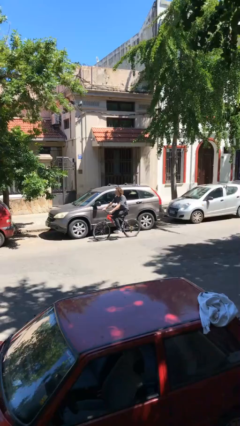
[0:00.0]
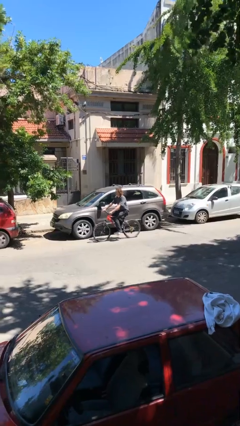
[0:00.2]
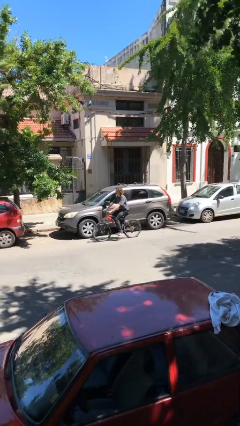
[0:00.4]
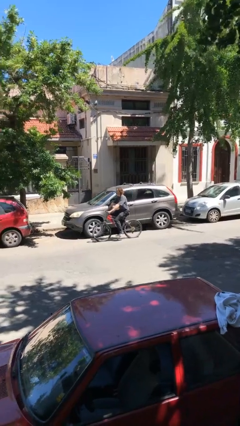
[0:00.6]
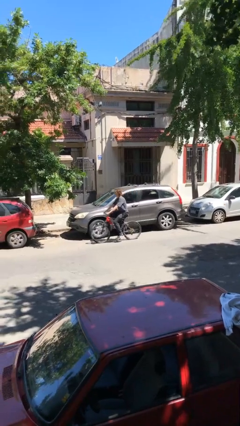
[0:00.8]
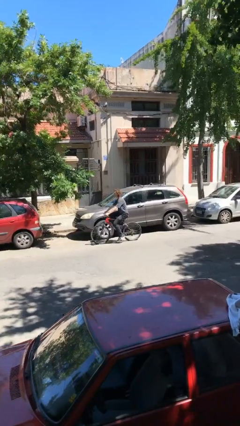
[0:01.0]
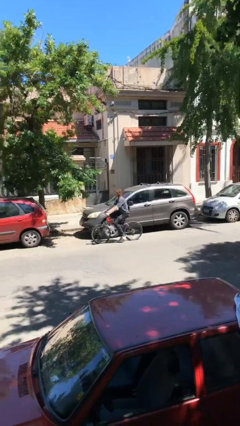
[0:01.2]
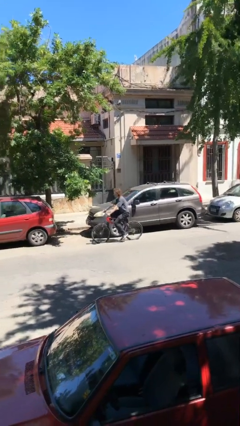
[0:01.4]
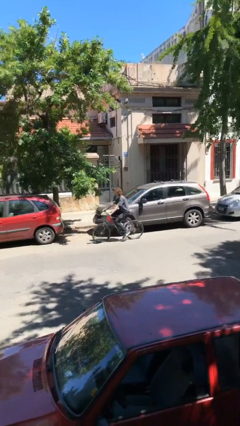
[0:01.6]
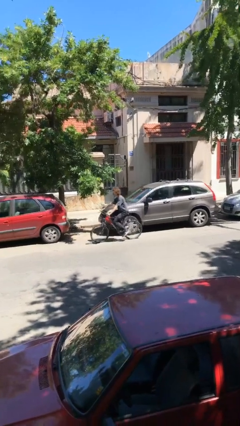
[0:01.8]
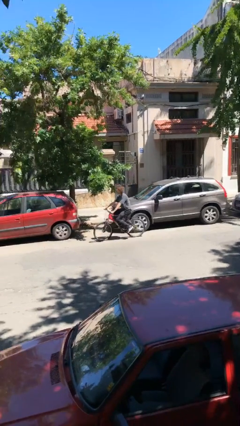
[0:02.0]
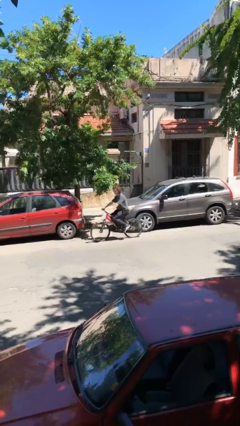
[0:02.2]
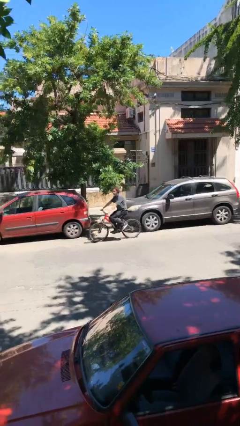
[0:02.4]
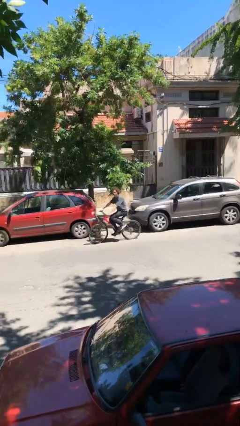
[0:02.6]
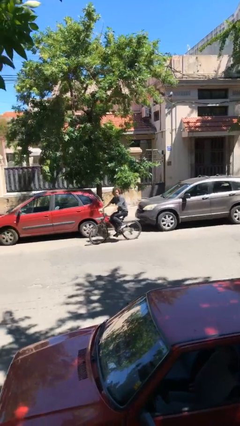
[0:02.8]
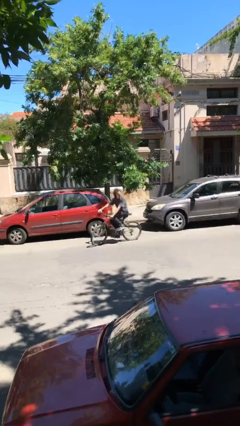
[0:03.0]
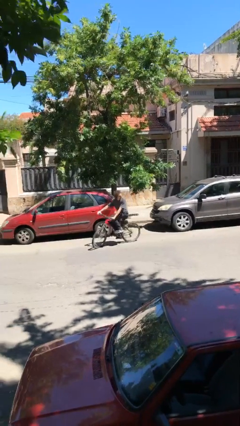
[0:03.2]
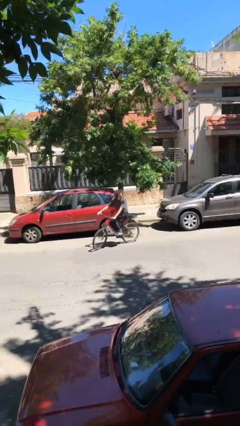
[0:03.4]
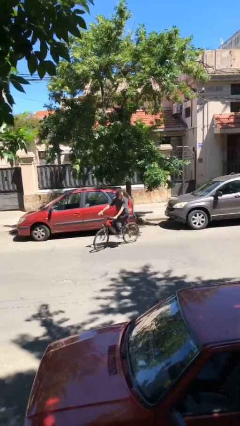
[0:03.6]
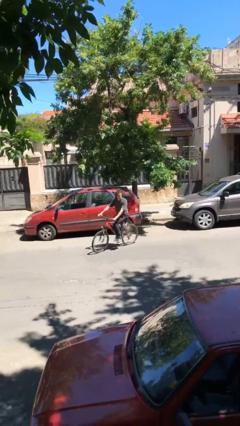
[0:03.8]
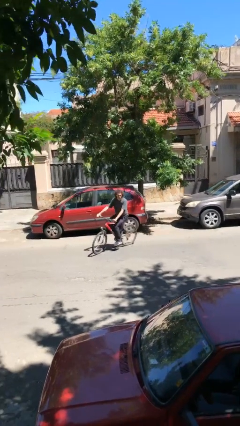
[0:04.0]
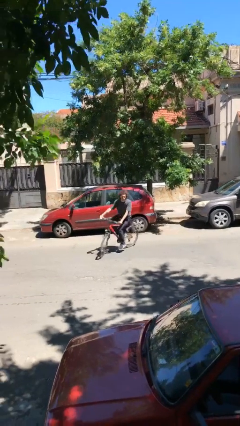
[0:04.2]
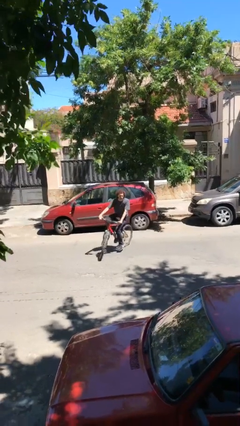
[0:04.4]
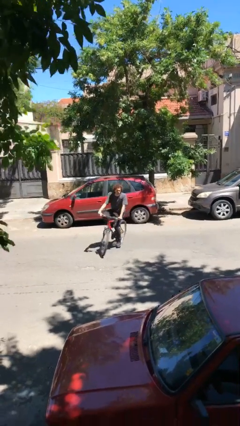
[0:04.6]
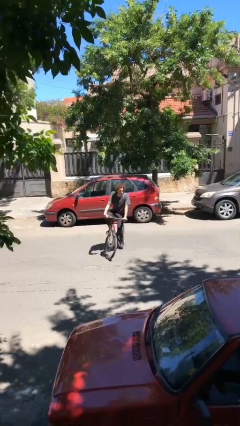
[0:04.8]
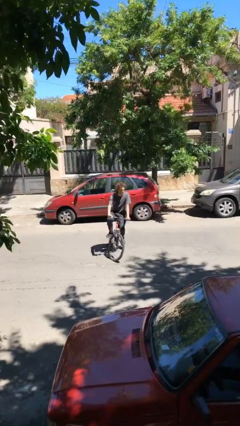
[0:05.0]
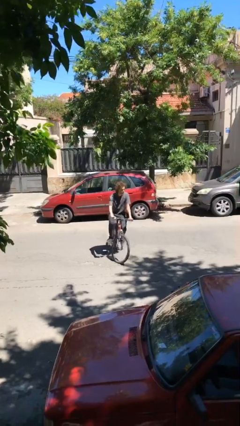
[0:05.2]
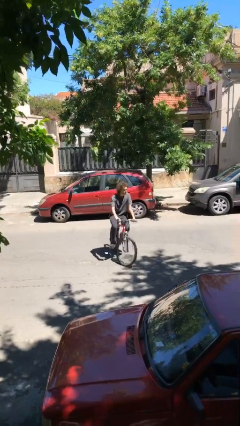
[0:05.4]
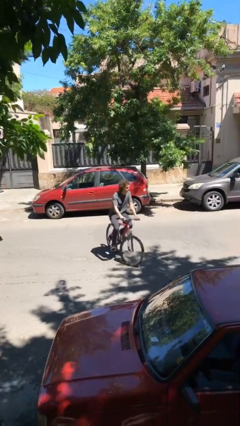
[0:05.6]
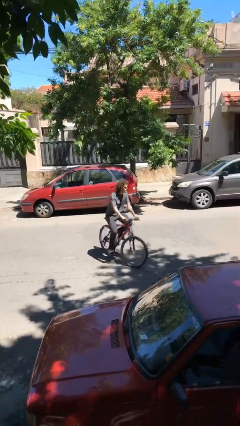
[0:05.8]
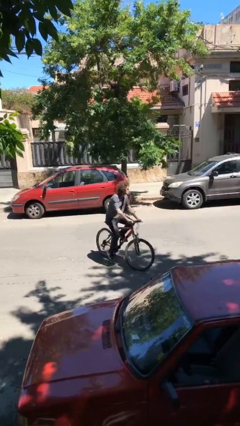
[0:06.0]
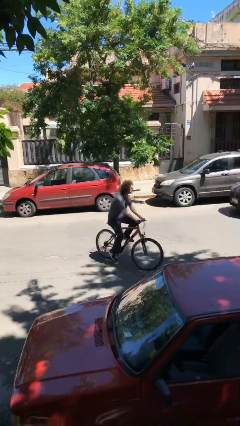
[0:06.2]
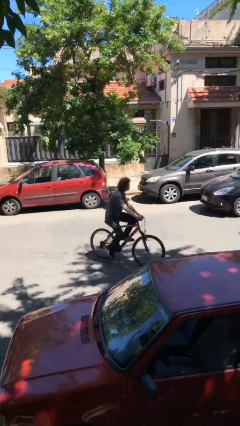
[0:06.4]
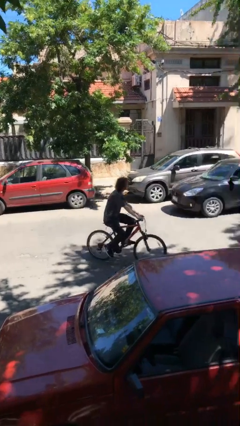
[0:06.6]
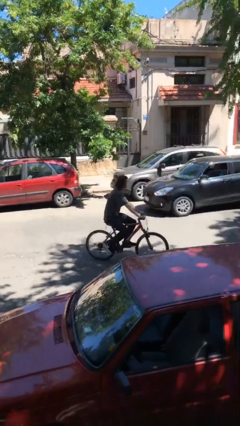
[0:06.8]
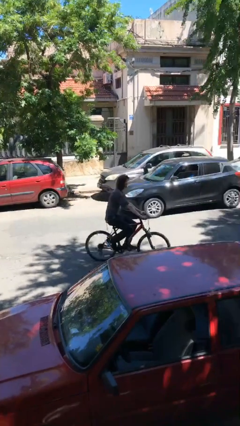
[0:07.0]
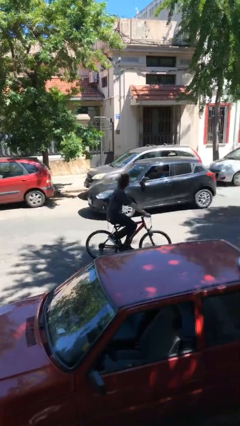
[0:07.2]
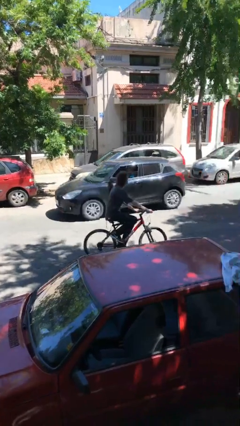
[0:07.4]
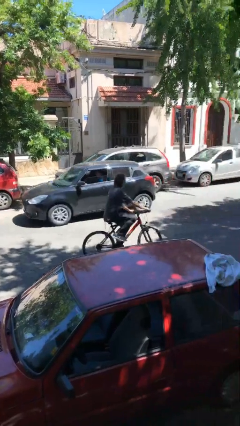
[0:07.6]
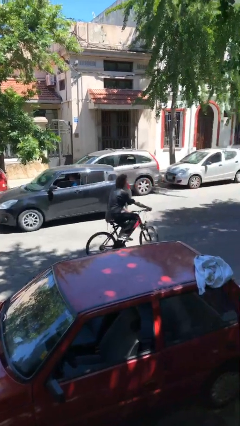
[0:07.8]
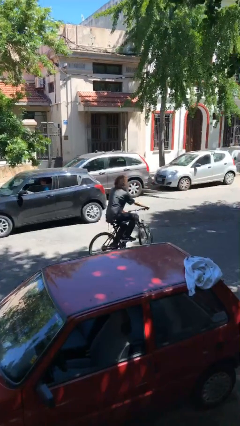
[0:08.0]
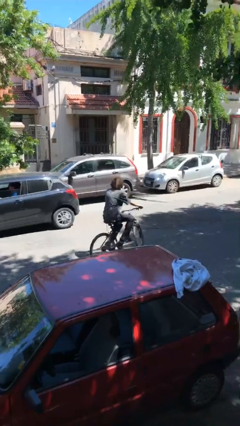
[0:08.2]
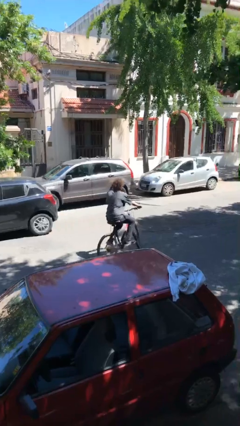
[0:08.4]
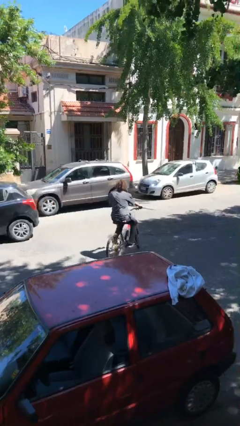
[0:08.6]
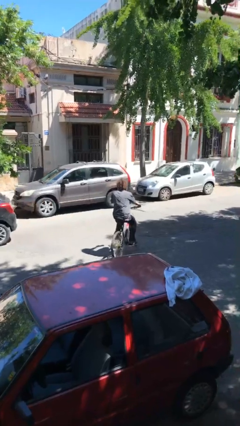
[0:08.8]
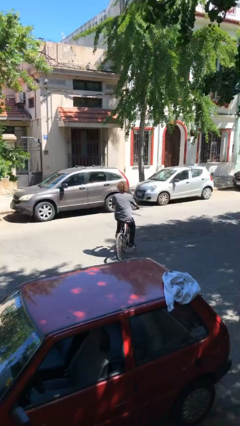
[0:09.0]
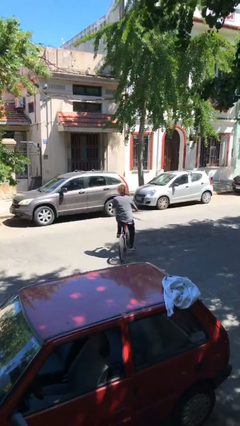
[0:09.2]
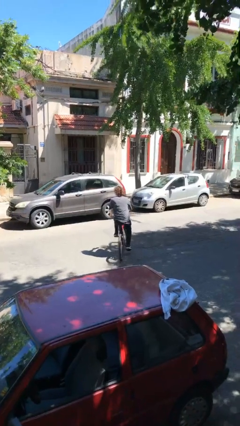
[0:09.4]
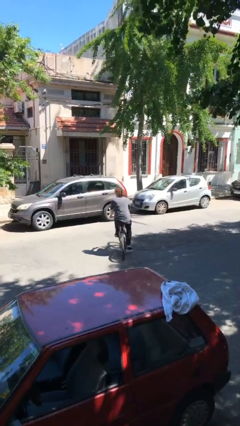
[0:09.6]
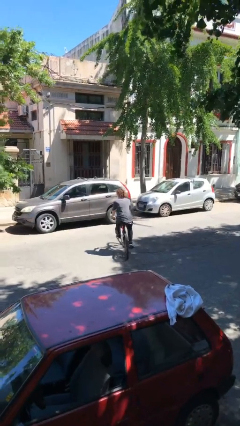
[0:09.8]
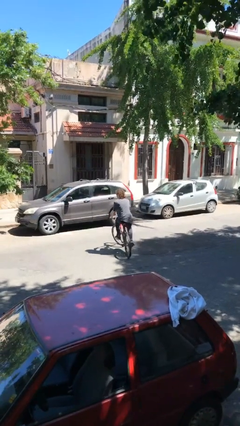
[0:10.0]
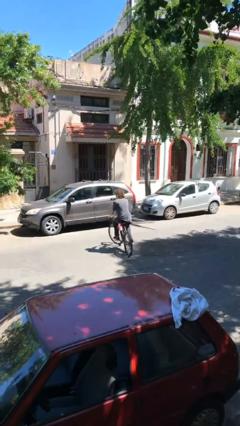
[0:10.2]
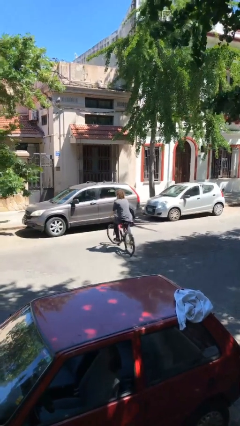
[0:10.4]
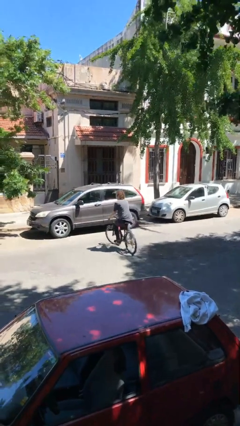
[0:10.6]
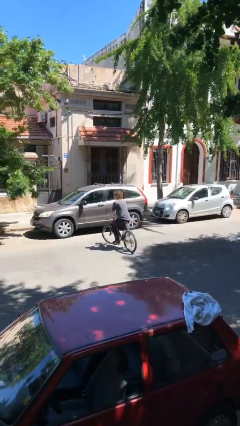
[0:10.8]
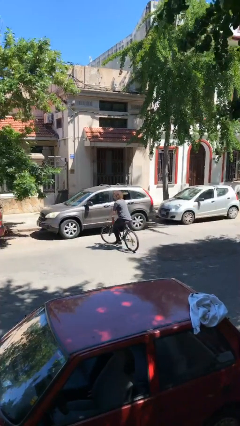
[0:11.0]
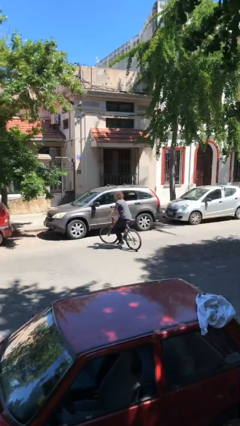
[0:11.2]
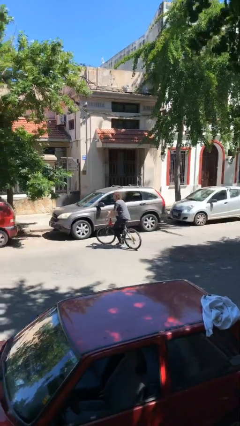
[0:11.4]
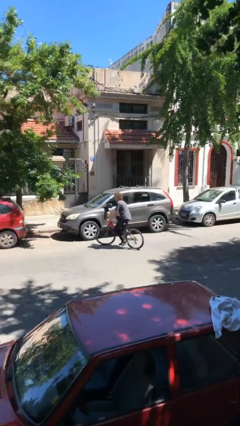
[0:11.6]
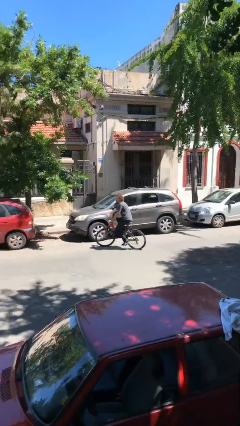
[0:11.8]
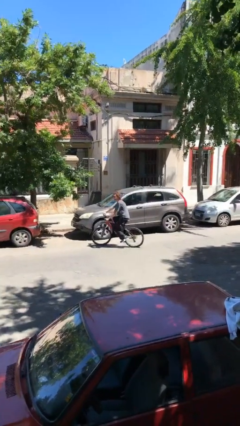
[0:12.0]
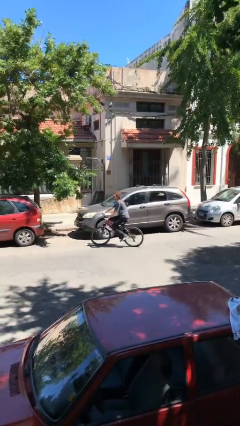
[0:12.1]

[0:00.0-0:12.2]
person rides bicycle

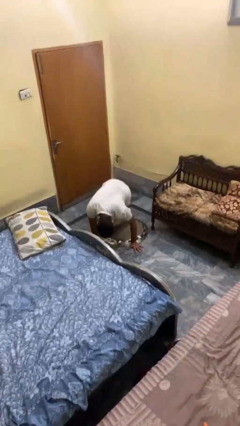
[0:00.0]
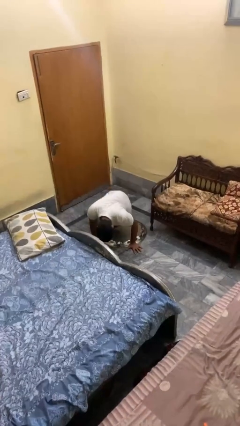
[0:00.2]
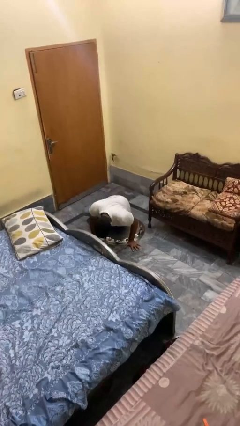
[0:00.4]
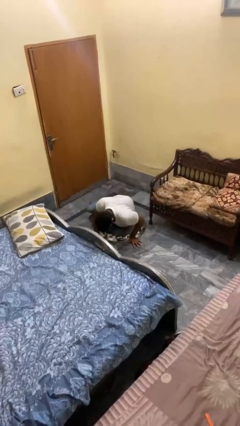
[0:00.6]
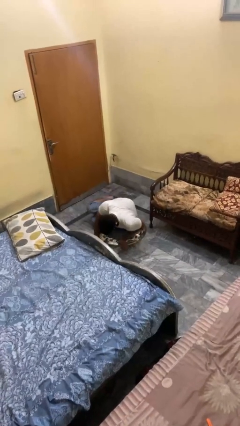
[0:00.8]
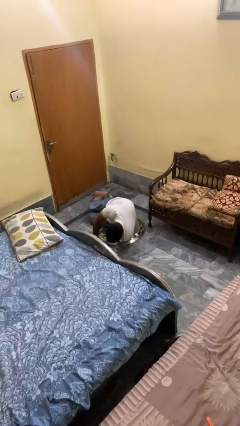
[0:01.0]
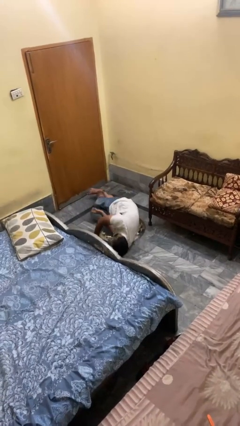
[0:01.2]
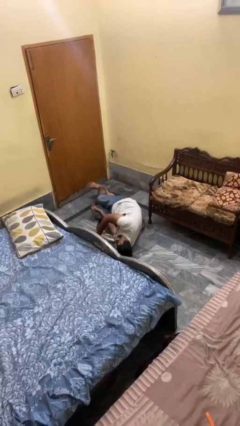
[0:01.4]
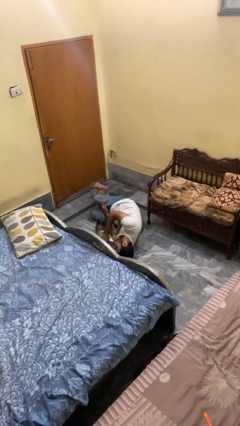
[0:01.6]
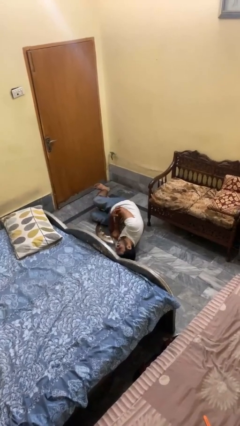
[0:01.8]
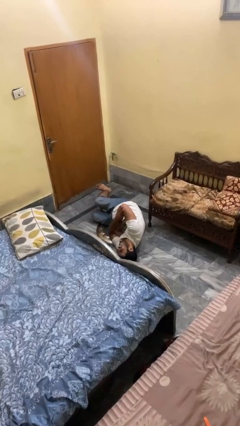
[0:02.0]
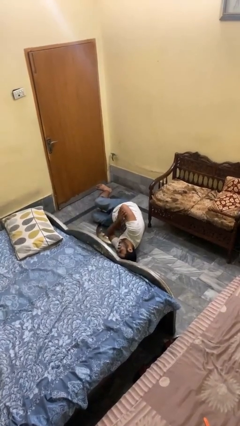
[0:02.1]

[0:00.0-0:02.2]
person lies down on floor

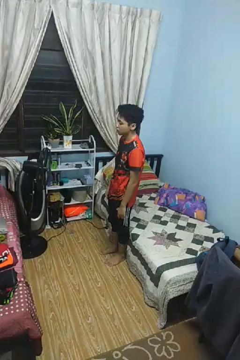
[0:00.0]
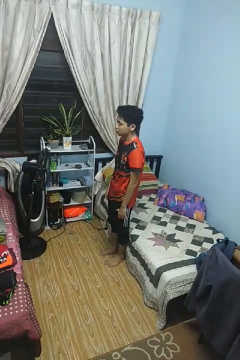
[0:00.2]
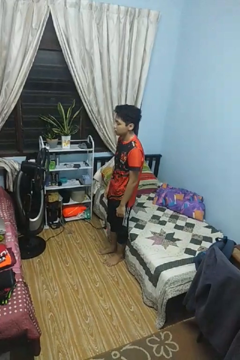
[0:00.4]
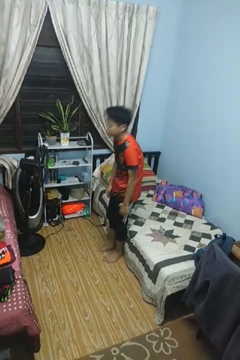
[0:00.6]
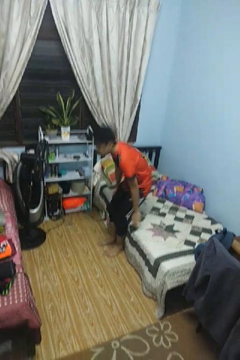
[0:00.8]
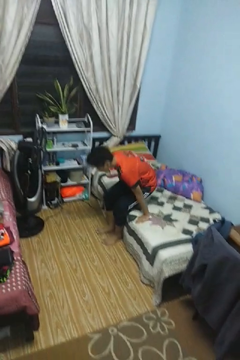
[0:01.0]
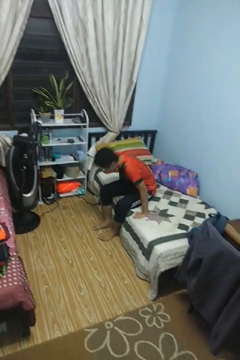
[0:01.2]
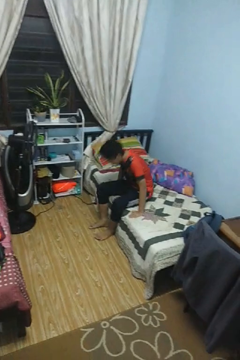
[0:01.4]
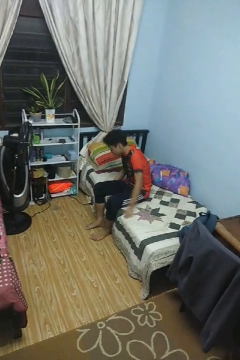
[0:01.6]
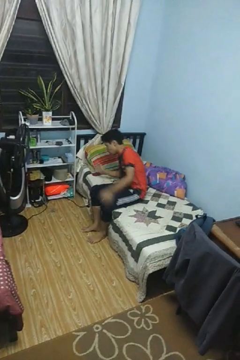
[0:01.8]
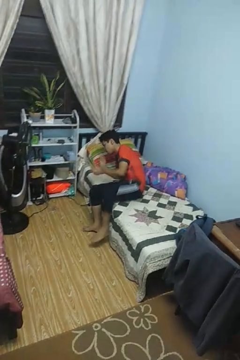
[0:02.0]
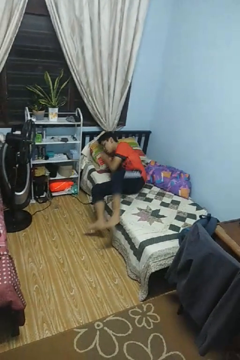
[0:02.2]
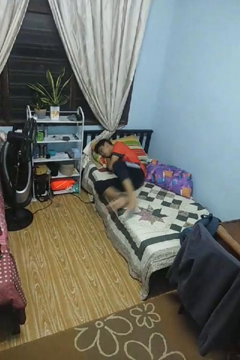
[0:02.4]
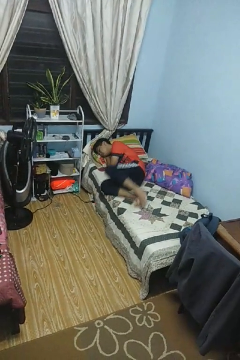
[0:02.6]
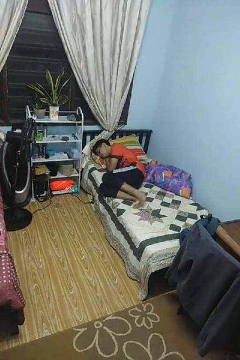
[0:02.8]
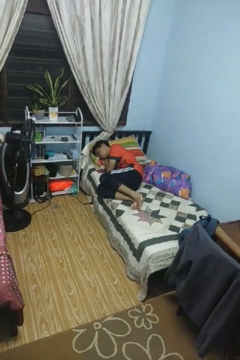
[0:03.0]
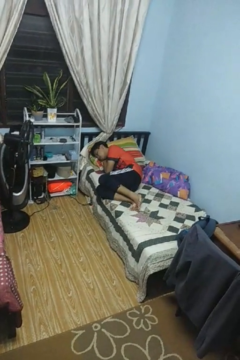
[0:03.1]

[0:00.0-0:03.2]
person lies down on bed

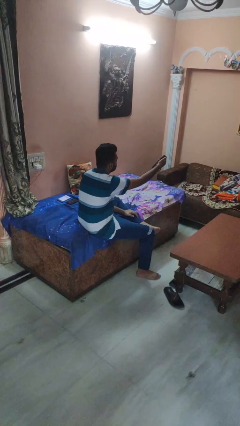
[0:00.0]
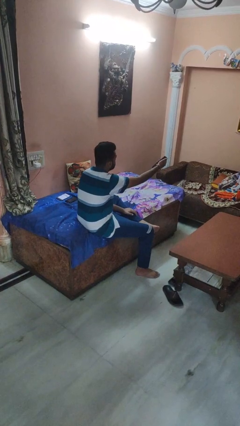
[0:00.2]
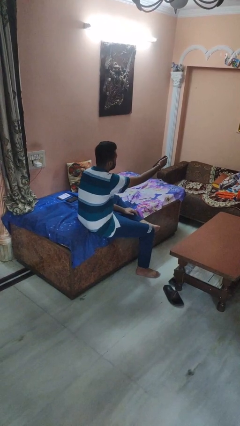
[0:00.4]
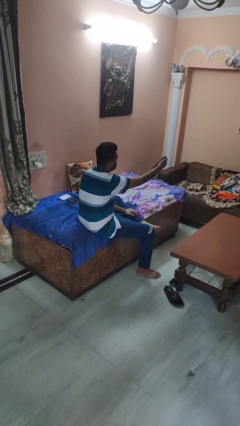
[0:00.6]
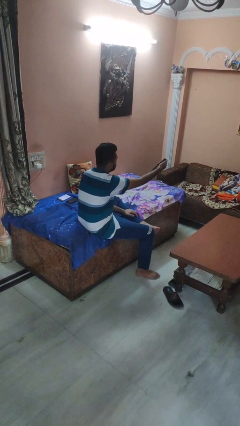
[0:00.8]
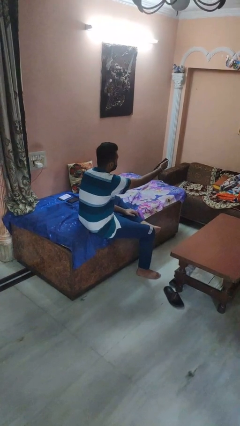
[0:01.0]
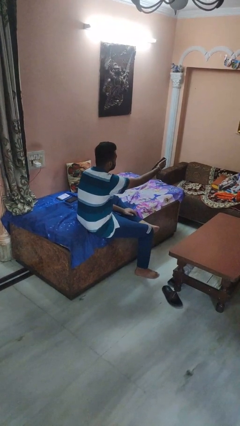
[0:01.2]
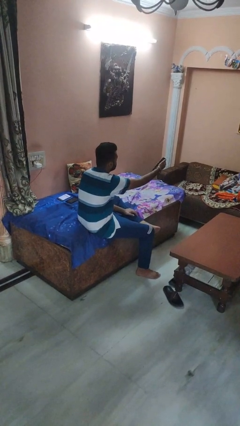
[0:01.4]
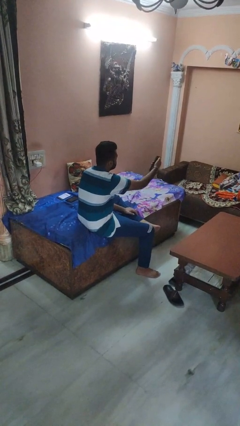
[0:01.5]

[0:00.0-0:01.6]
person uses television remote
